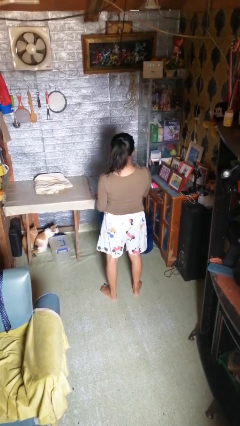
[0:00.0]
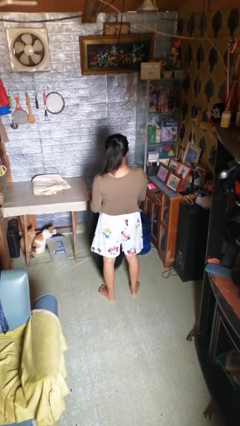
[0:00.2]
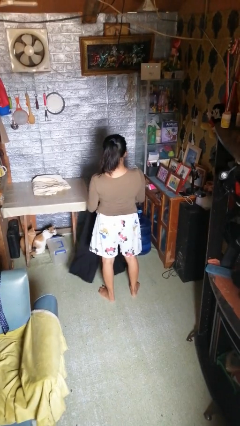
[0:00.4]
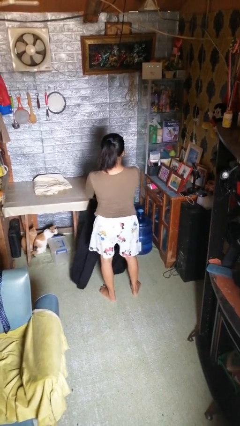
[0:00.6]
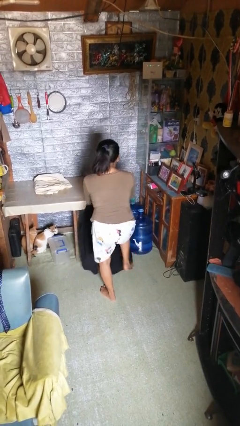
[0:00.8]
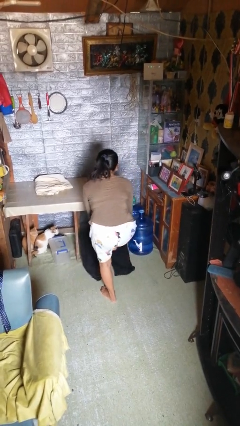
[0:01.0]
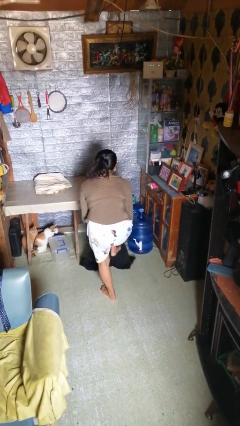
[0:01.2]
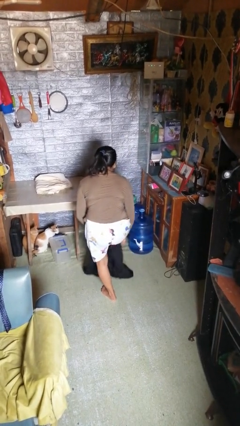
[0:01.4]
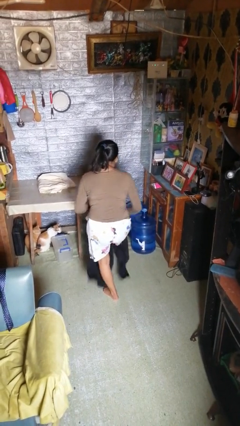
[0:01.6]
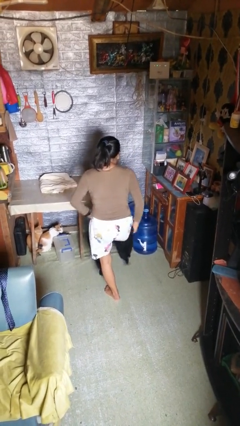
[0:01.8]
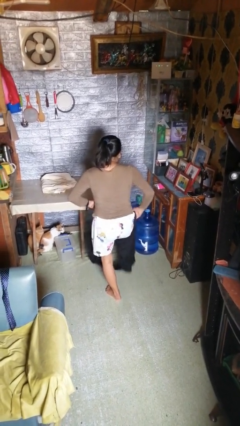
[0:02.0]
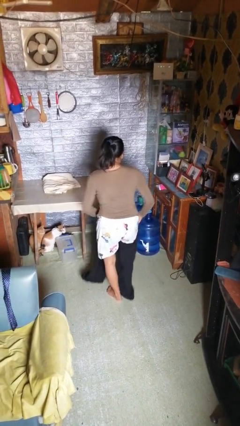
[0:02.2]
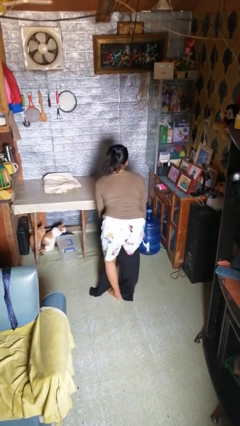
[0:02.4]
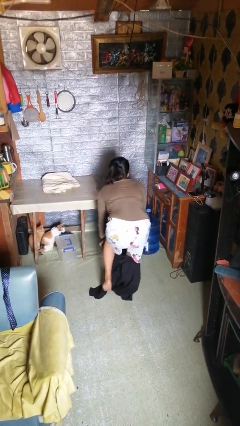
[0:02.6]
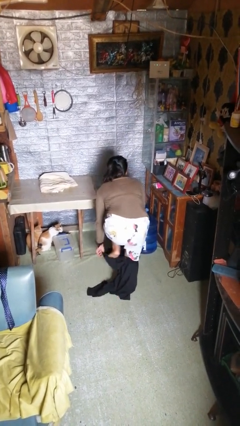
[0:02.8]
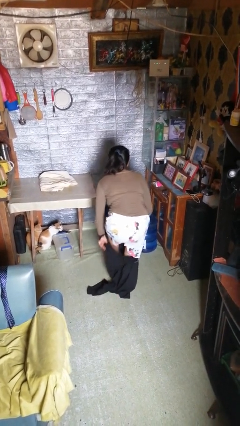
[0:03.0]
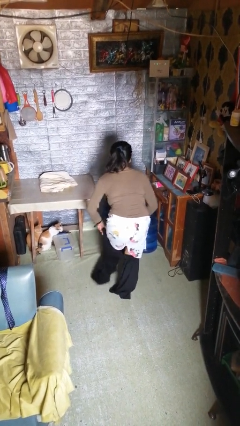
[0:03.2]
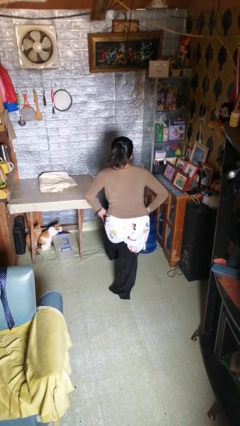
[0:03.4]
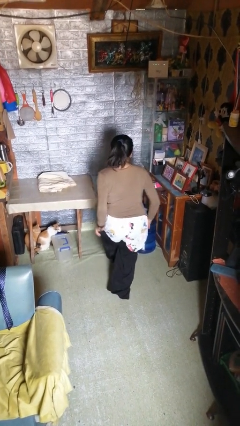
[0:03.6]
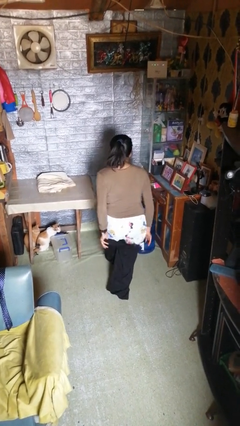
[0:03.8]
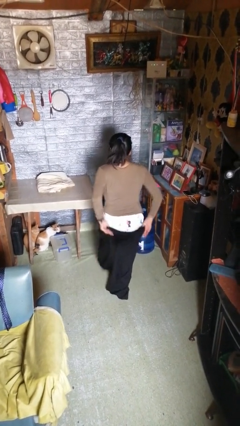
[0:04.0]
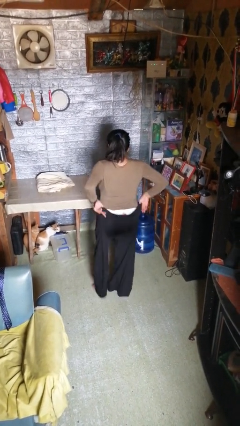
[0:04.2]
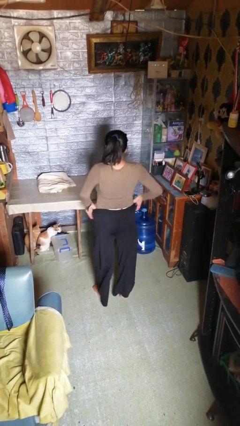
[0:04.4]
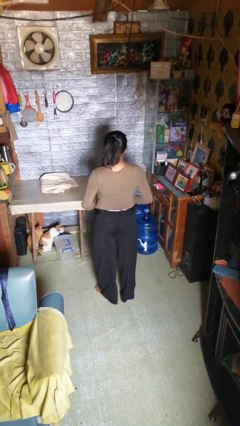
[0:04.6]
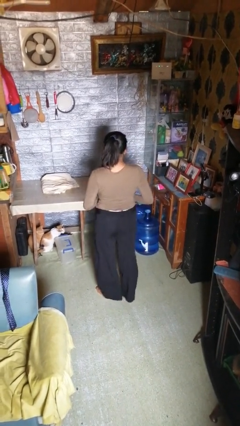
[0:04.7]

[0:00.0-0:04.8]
person puts on pants

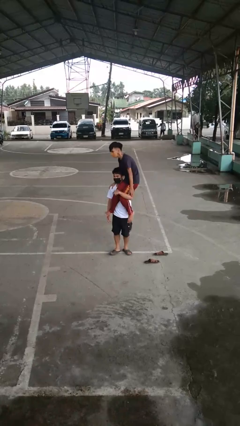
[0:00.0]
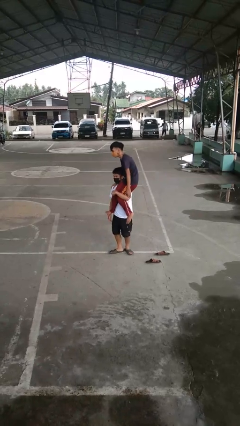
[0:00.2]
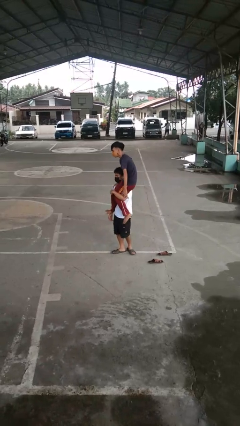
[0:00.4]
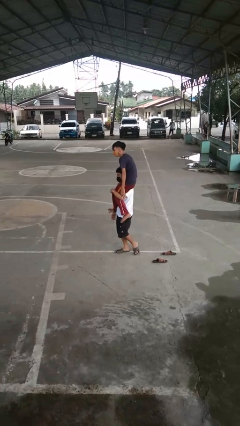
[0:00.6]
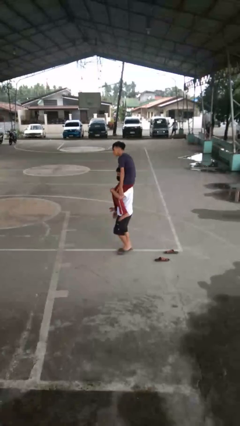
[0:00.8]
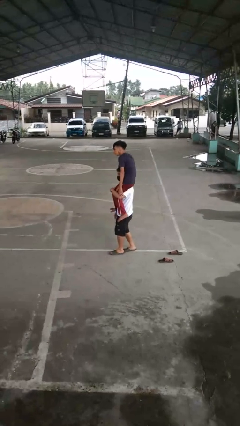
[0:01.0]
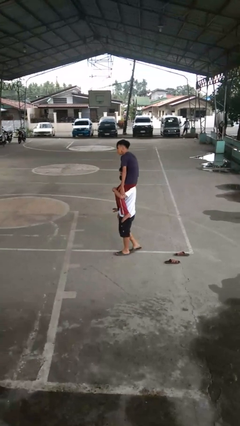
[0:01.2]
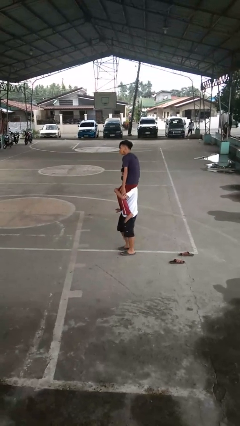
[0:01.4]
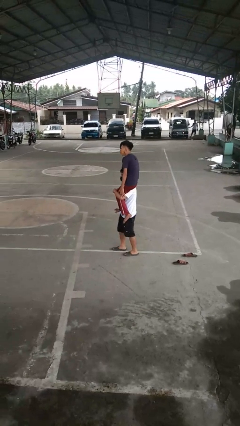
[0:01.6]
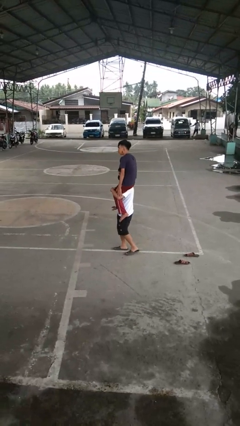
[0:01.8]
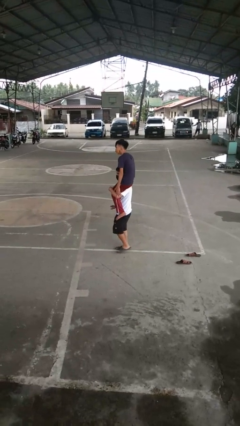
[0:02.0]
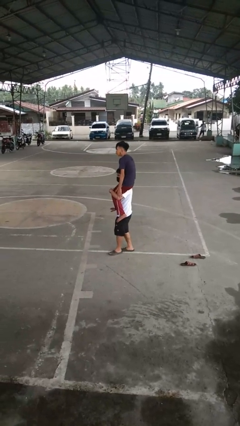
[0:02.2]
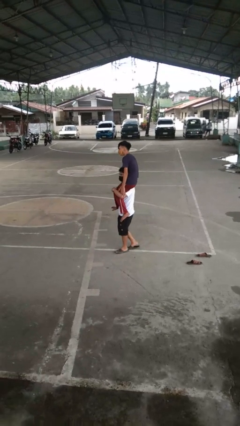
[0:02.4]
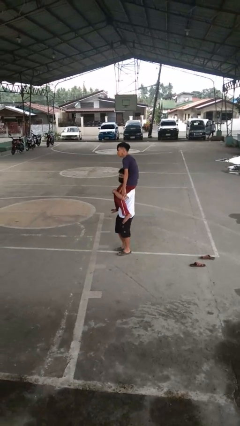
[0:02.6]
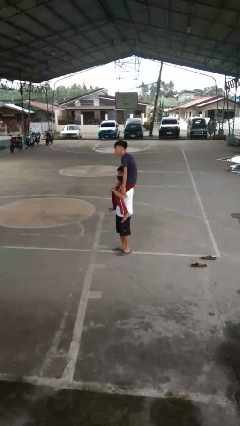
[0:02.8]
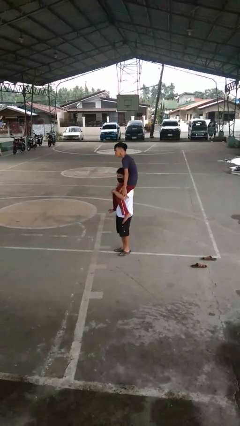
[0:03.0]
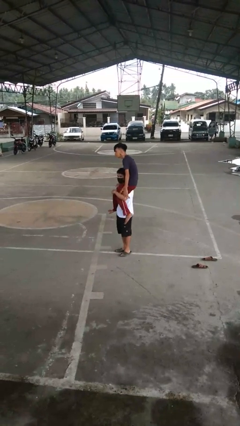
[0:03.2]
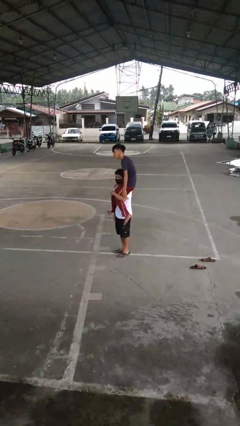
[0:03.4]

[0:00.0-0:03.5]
person carries person on shoulders

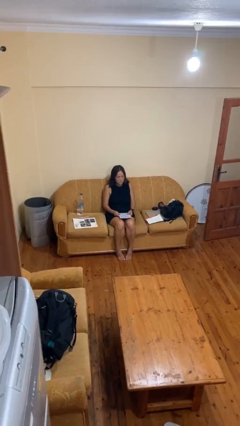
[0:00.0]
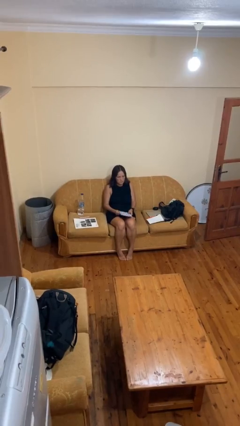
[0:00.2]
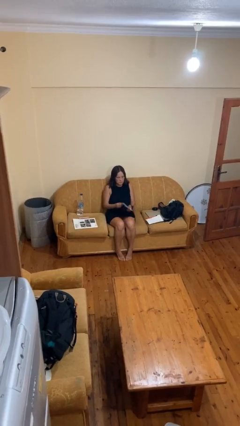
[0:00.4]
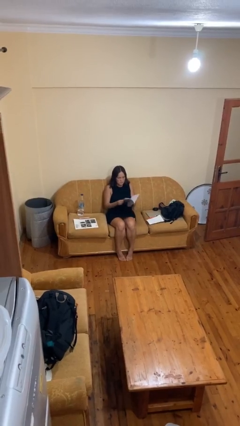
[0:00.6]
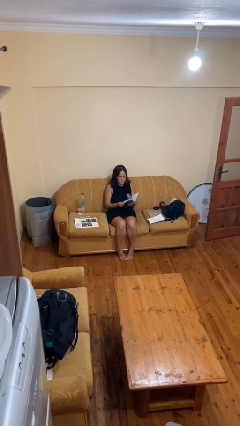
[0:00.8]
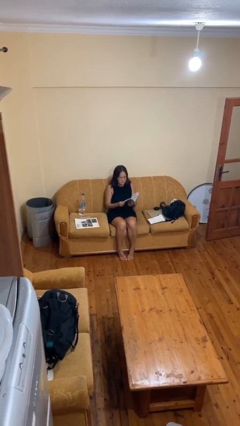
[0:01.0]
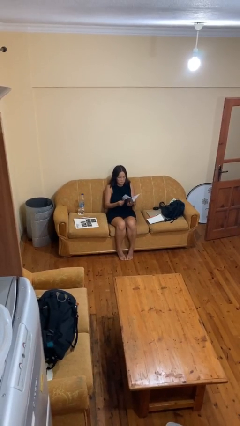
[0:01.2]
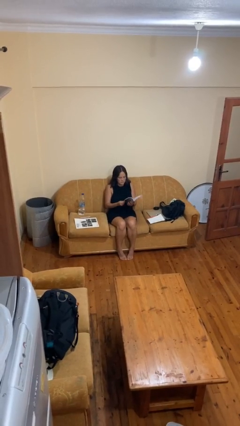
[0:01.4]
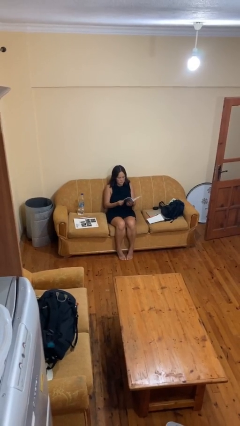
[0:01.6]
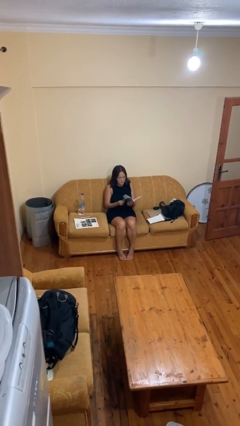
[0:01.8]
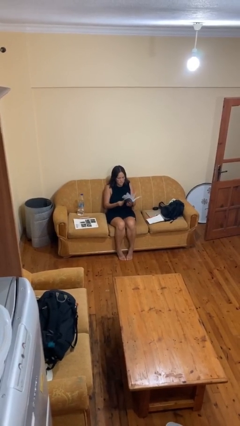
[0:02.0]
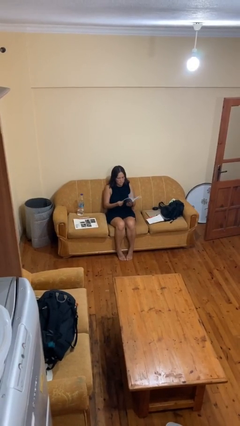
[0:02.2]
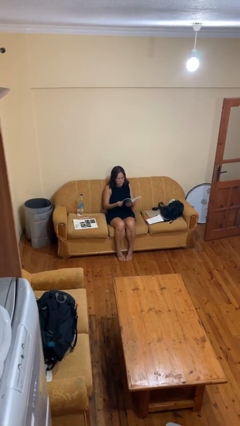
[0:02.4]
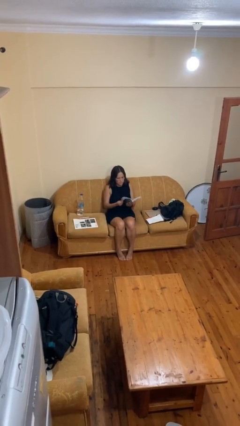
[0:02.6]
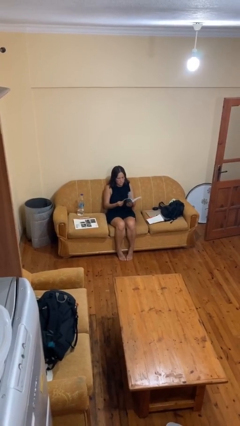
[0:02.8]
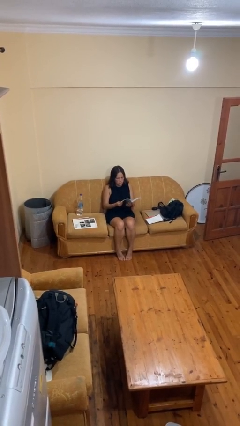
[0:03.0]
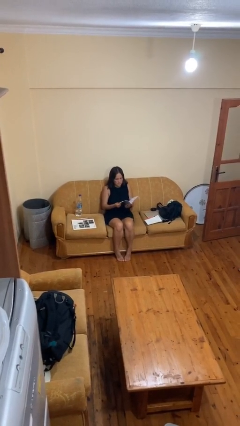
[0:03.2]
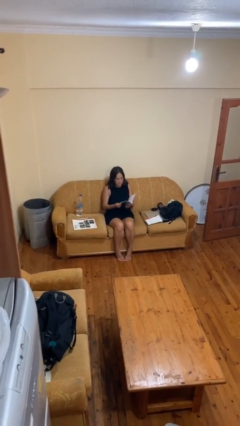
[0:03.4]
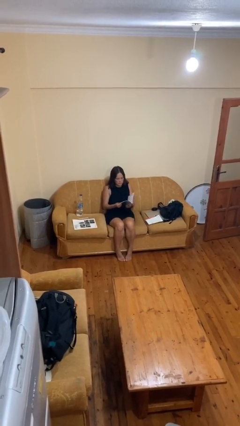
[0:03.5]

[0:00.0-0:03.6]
person reads book

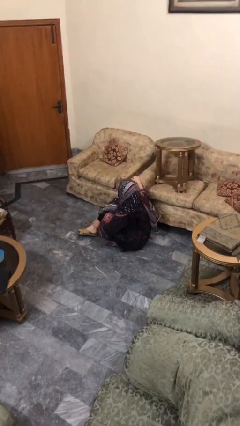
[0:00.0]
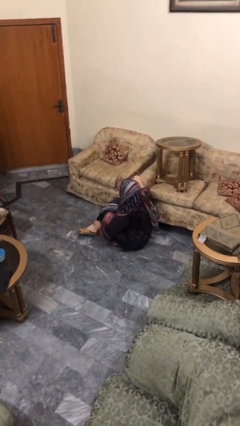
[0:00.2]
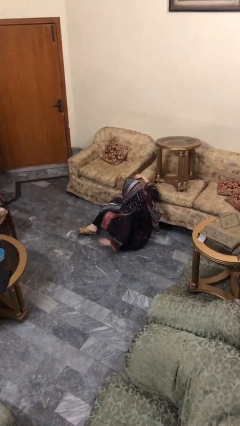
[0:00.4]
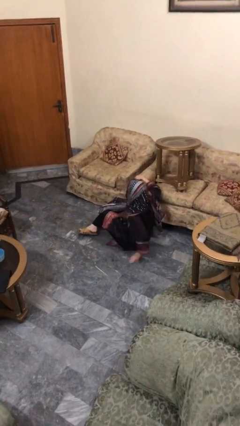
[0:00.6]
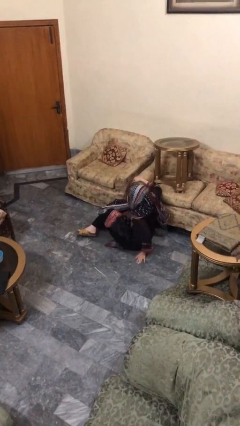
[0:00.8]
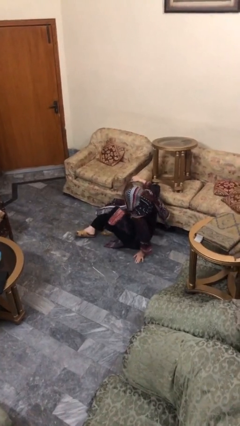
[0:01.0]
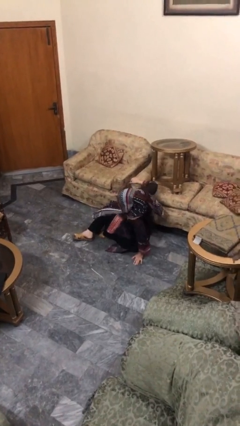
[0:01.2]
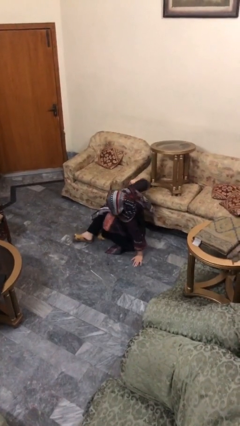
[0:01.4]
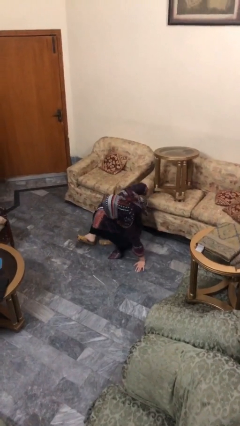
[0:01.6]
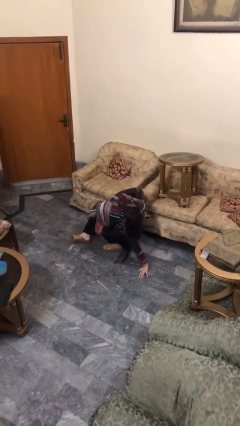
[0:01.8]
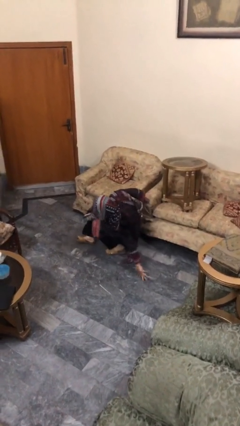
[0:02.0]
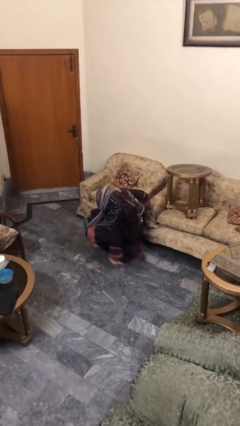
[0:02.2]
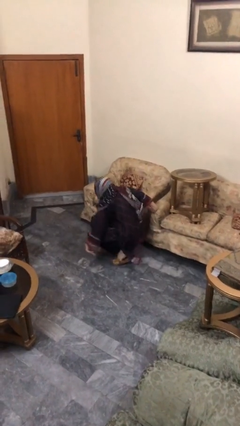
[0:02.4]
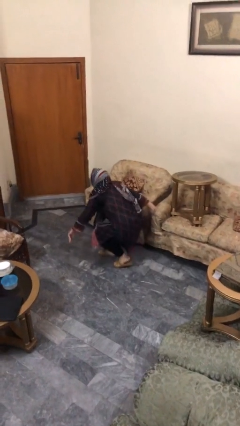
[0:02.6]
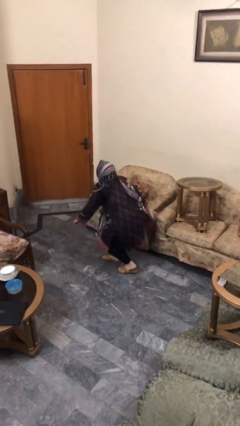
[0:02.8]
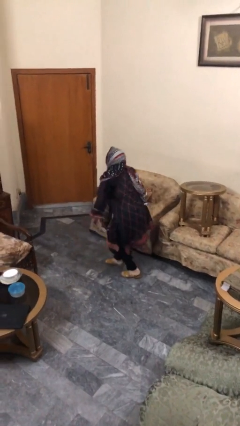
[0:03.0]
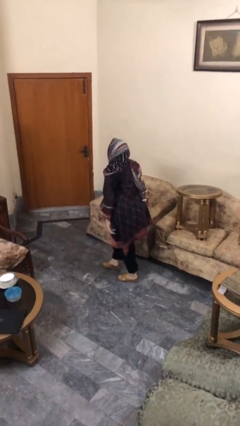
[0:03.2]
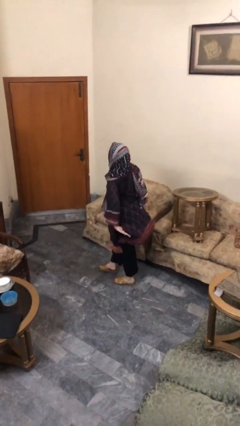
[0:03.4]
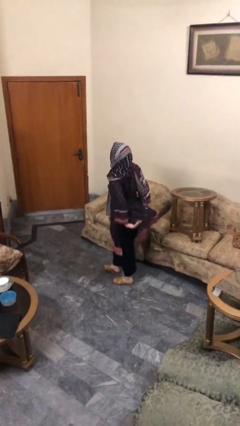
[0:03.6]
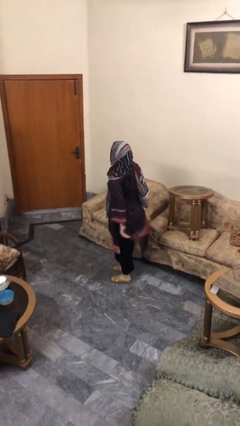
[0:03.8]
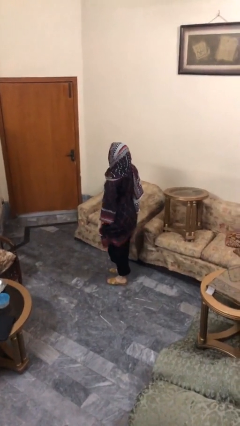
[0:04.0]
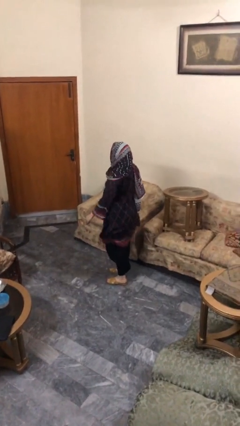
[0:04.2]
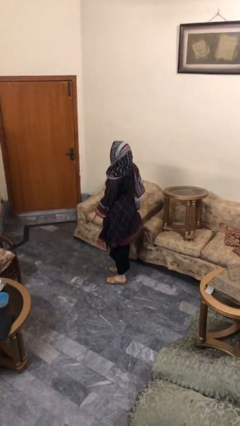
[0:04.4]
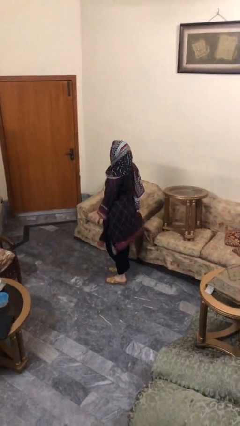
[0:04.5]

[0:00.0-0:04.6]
person stands up from floor

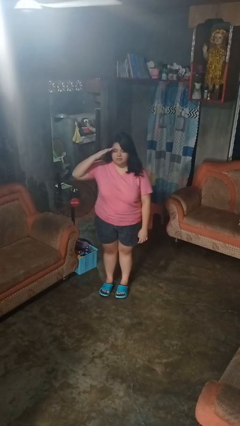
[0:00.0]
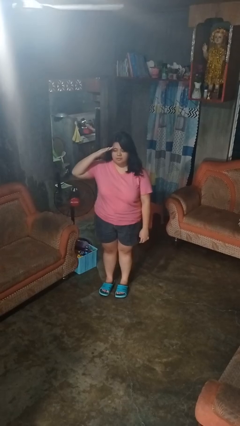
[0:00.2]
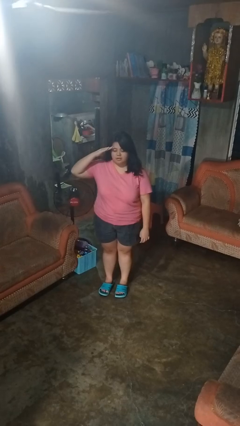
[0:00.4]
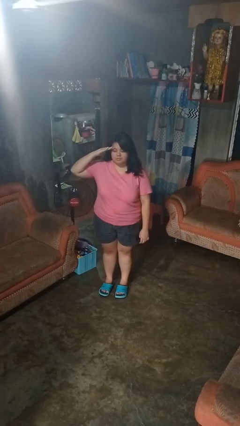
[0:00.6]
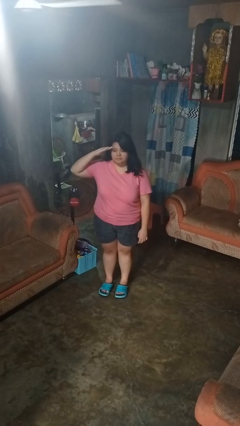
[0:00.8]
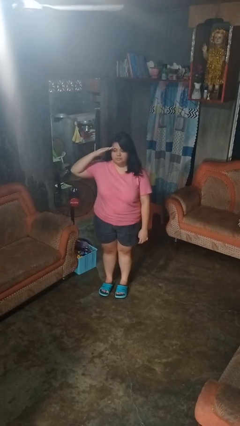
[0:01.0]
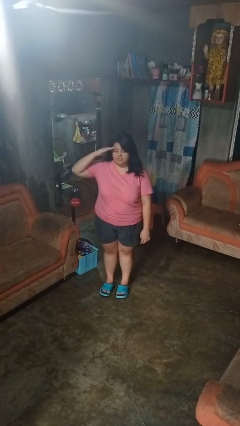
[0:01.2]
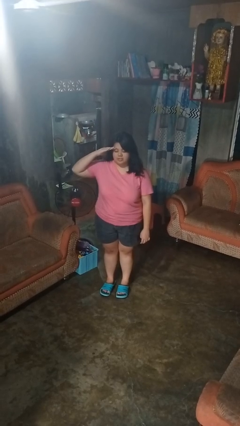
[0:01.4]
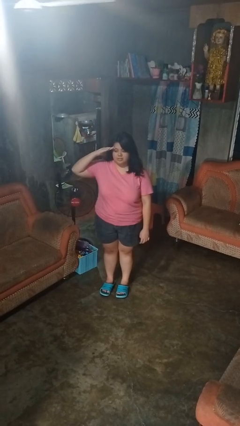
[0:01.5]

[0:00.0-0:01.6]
person salutes
